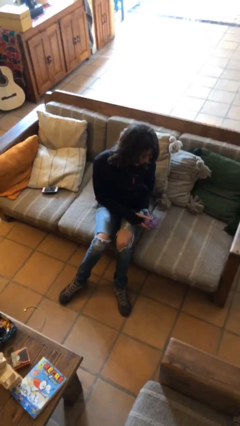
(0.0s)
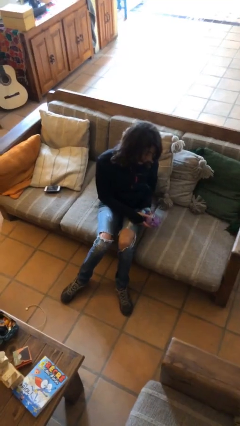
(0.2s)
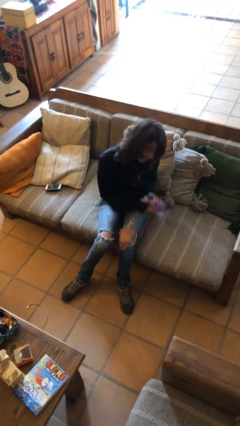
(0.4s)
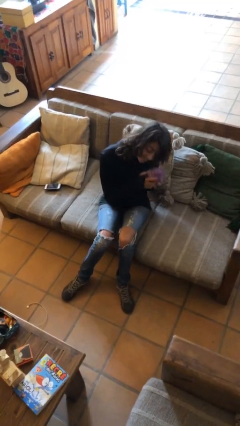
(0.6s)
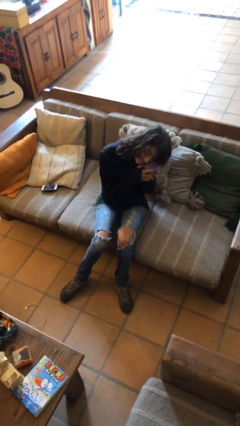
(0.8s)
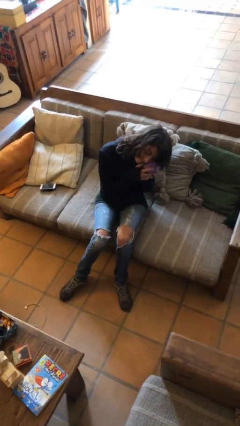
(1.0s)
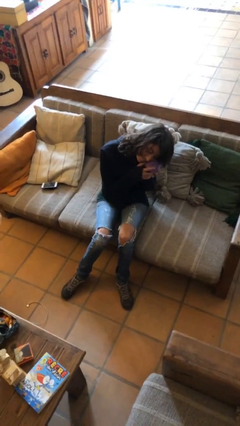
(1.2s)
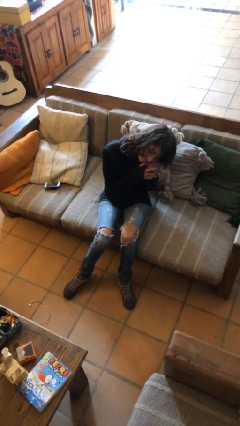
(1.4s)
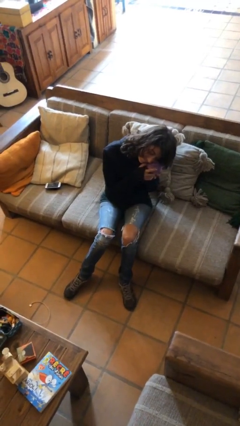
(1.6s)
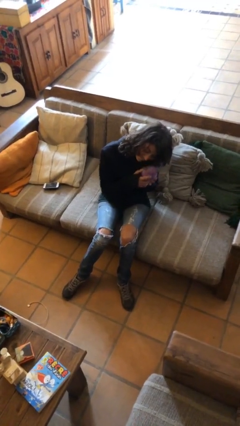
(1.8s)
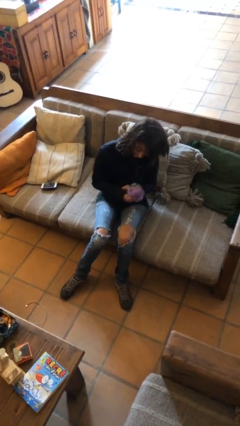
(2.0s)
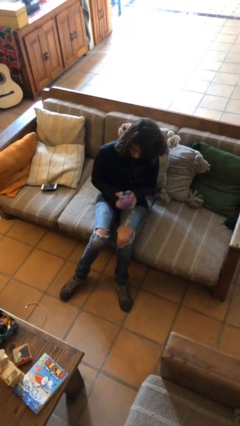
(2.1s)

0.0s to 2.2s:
person hugs stuffed animal

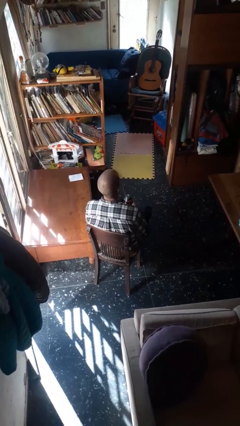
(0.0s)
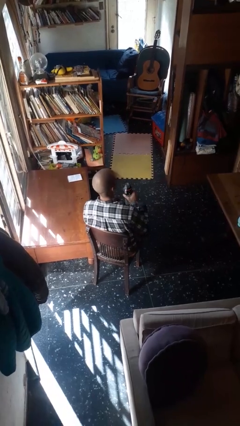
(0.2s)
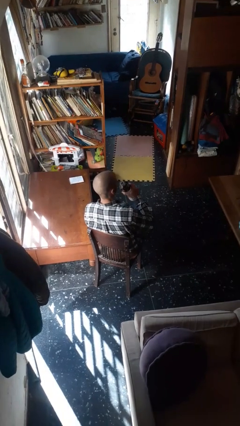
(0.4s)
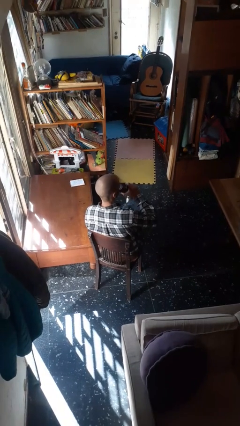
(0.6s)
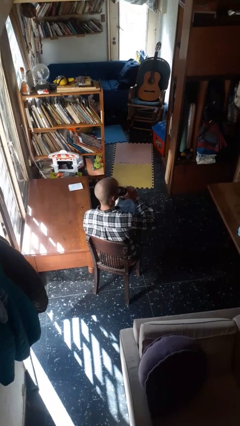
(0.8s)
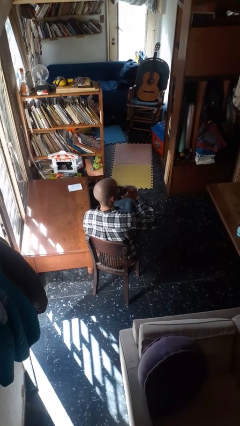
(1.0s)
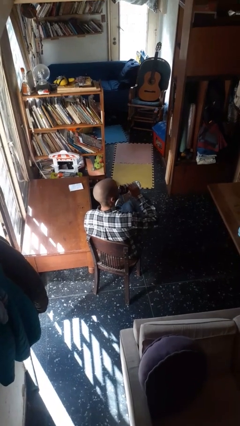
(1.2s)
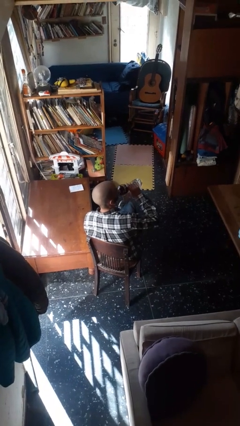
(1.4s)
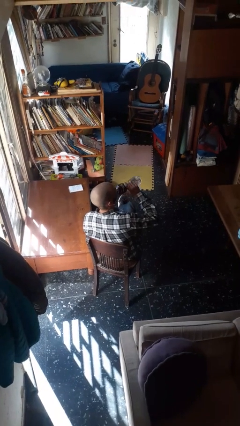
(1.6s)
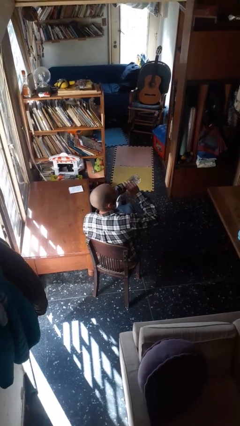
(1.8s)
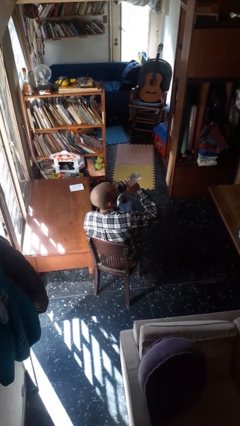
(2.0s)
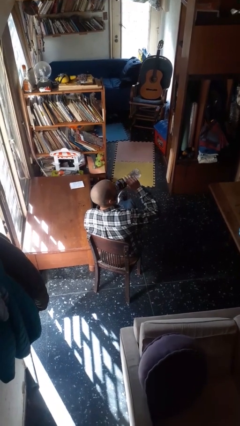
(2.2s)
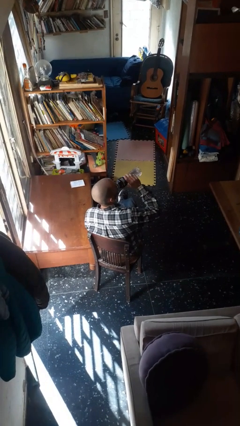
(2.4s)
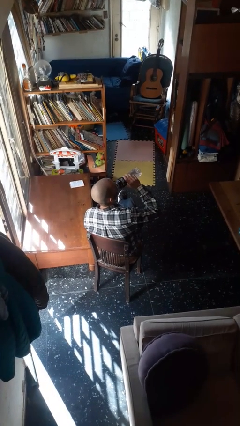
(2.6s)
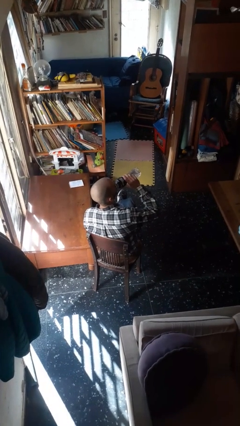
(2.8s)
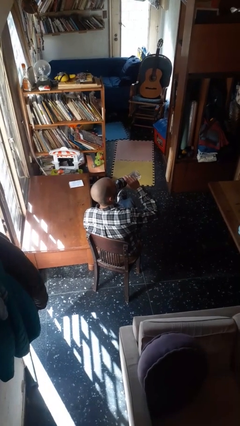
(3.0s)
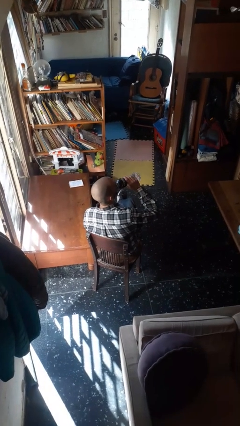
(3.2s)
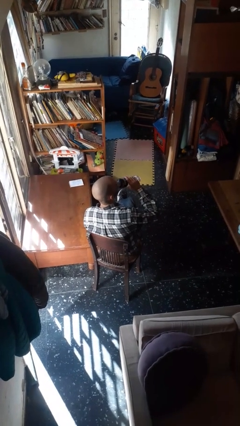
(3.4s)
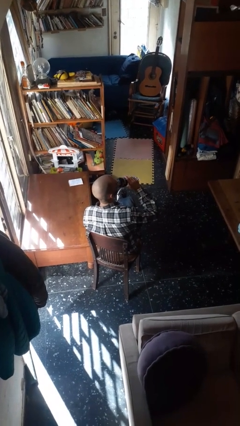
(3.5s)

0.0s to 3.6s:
person drinks from bottle

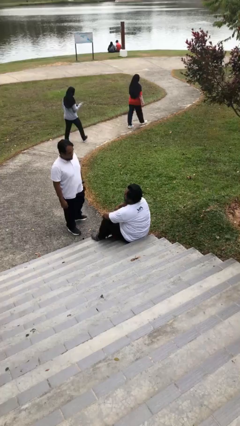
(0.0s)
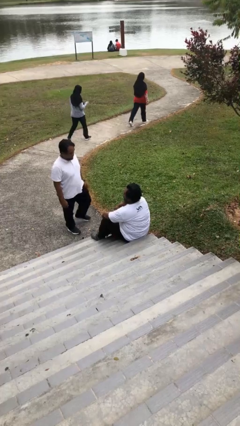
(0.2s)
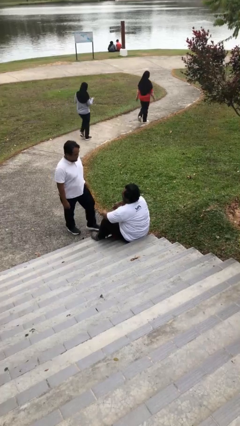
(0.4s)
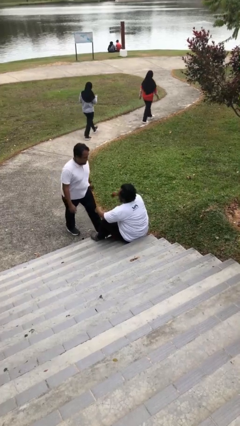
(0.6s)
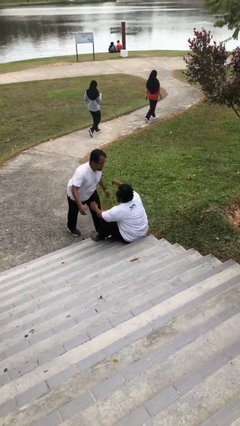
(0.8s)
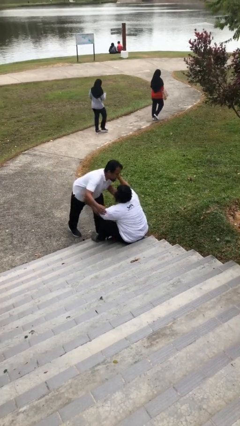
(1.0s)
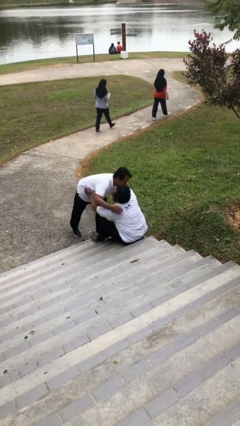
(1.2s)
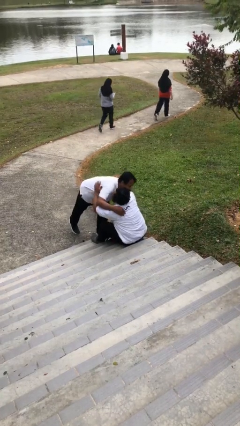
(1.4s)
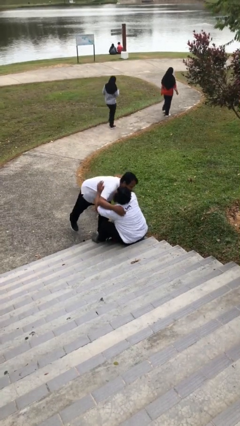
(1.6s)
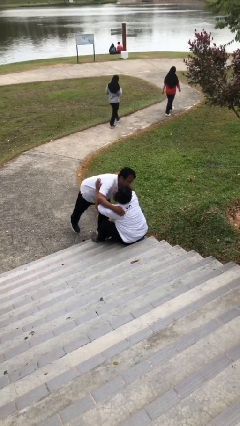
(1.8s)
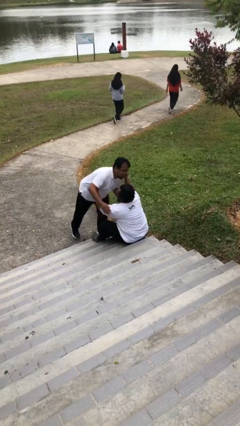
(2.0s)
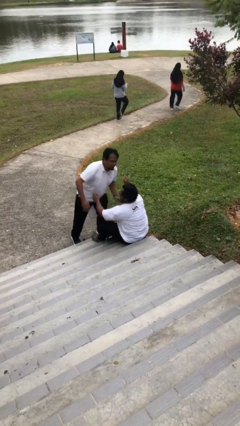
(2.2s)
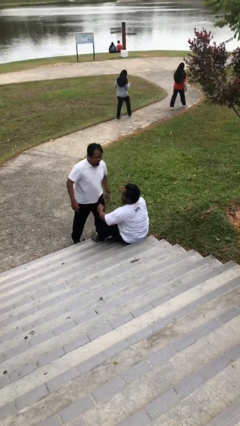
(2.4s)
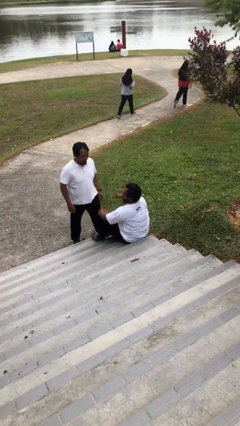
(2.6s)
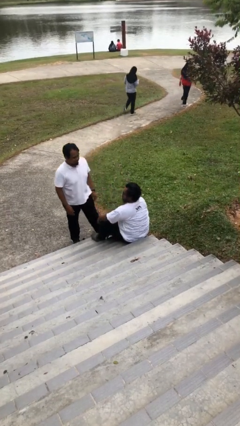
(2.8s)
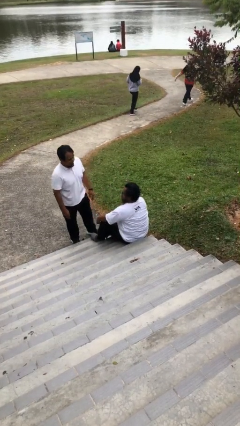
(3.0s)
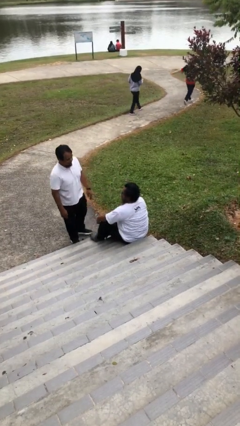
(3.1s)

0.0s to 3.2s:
person embraces person

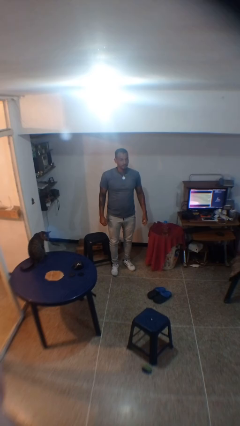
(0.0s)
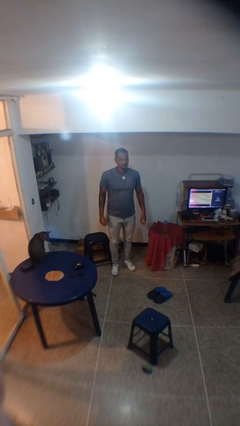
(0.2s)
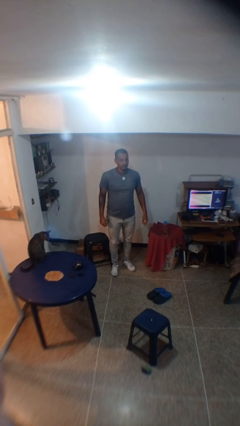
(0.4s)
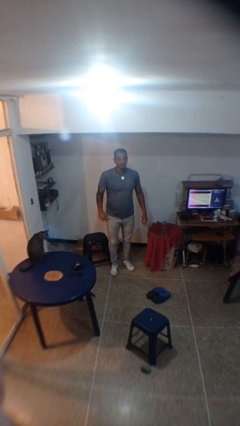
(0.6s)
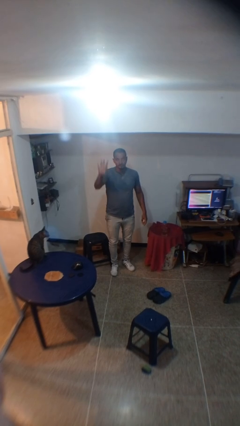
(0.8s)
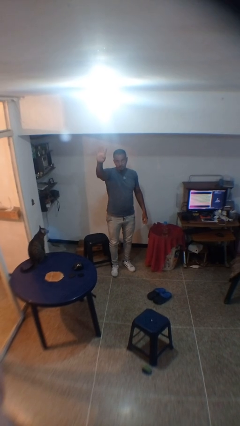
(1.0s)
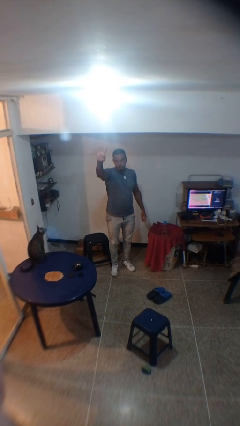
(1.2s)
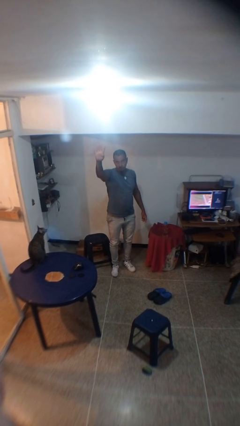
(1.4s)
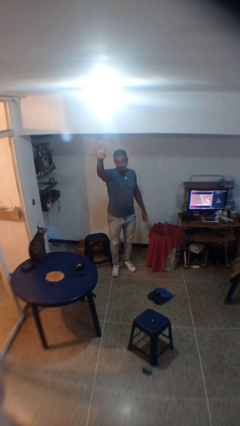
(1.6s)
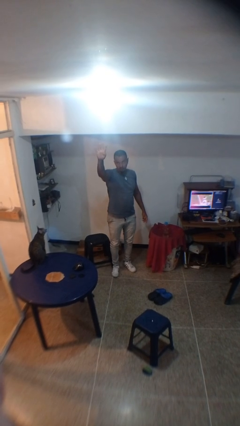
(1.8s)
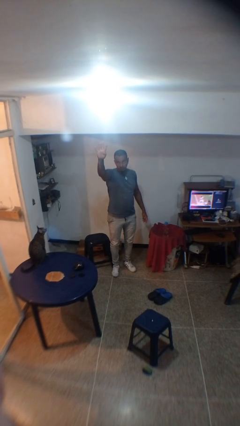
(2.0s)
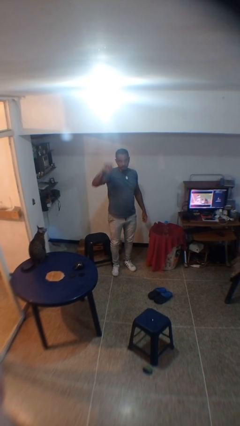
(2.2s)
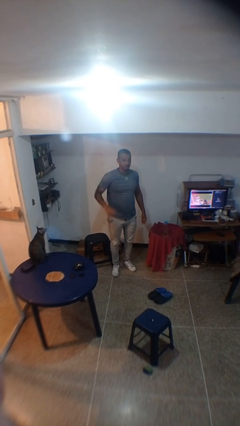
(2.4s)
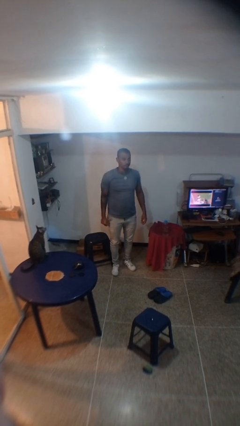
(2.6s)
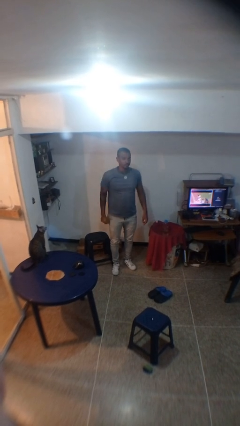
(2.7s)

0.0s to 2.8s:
person gestures number four

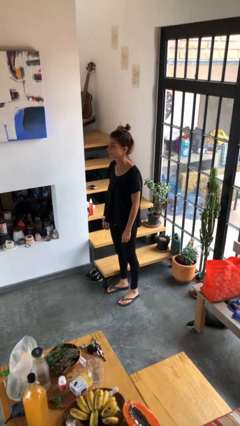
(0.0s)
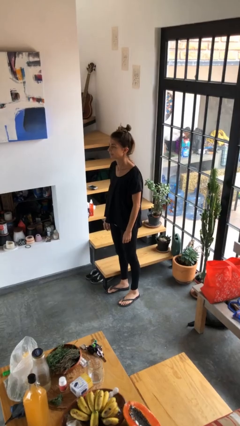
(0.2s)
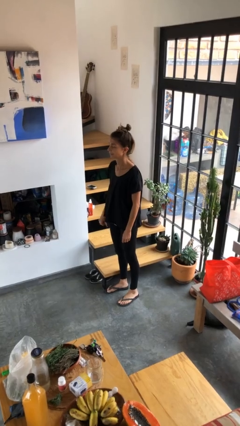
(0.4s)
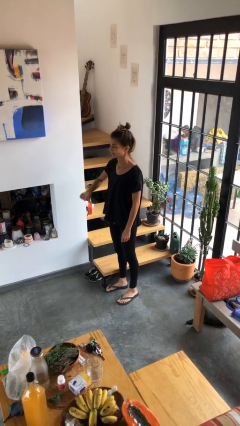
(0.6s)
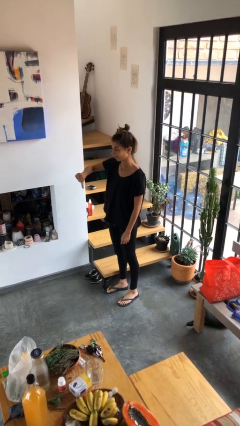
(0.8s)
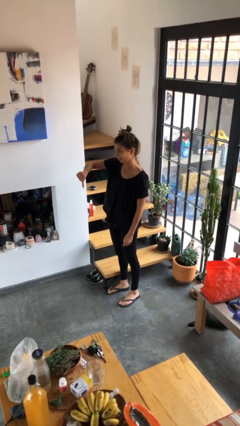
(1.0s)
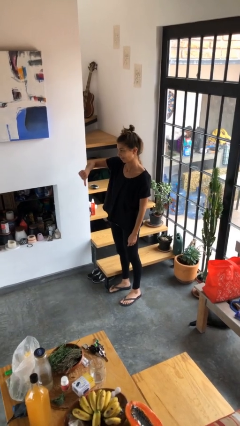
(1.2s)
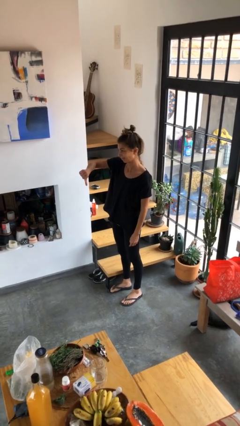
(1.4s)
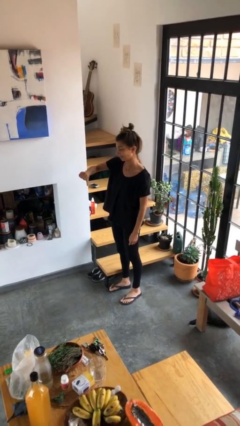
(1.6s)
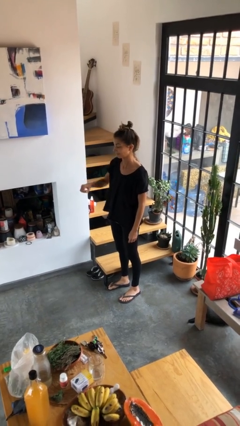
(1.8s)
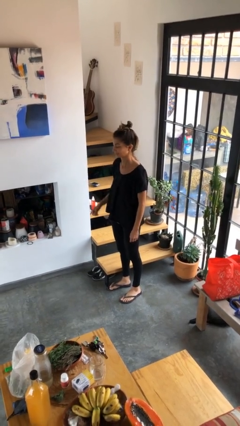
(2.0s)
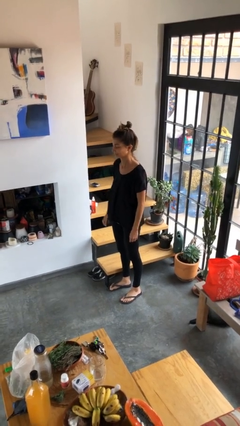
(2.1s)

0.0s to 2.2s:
person gestures thumbs down

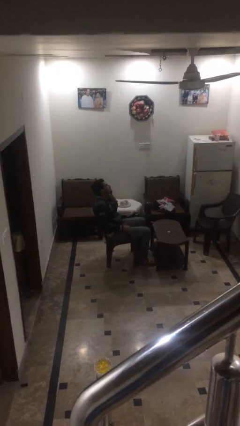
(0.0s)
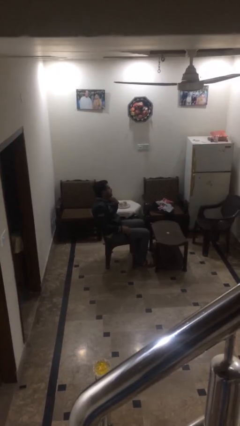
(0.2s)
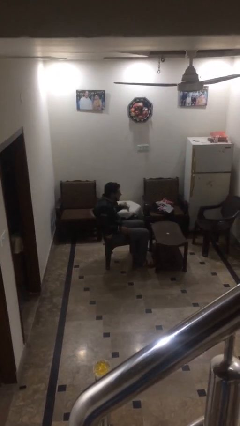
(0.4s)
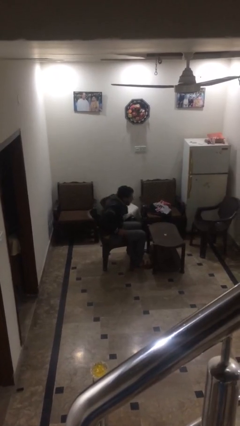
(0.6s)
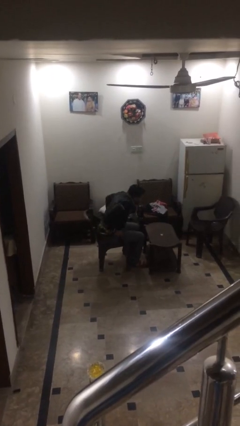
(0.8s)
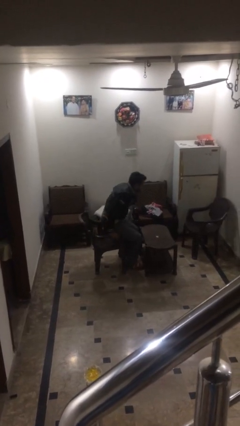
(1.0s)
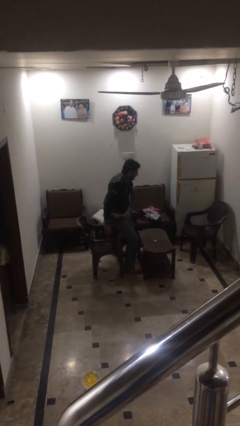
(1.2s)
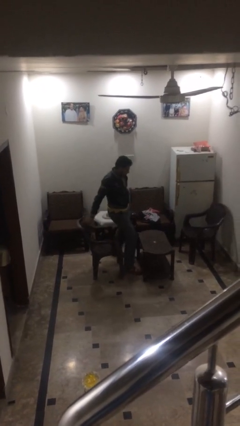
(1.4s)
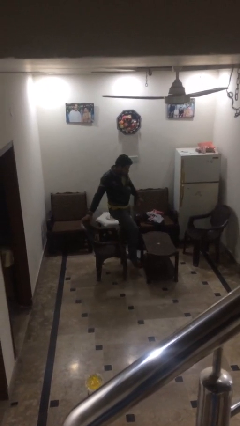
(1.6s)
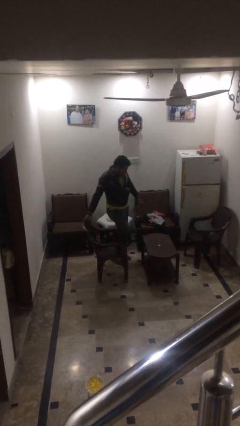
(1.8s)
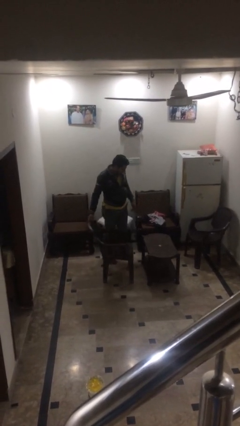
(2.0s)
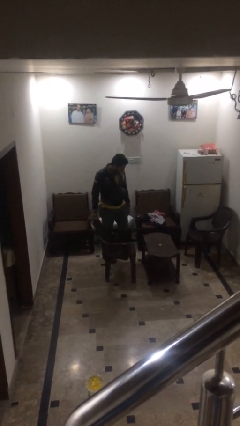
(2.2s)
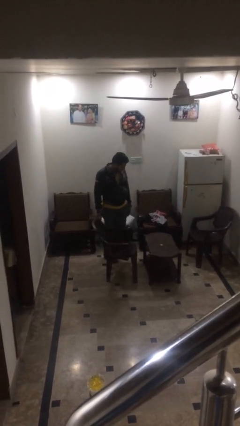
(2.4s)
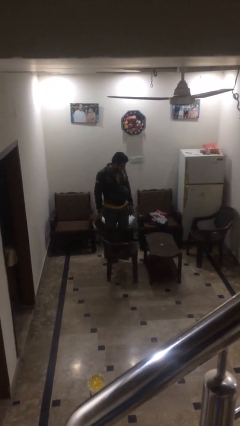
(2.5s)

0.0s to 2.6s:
person stands up

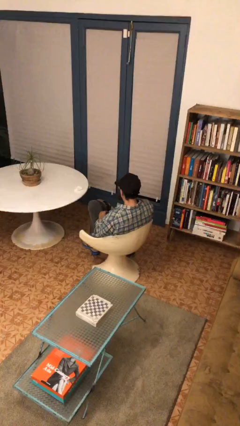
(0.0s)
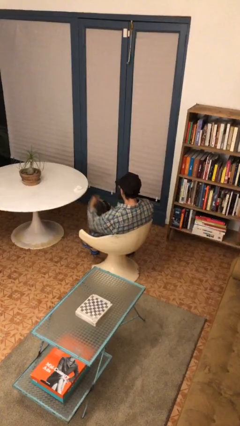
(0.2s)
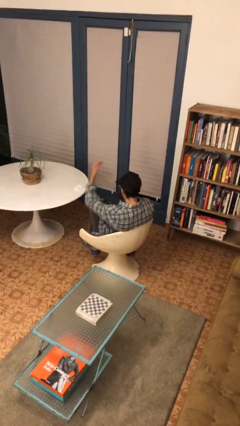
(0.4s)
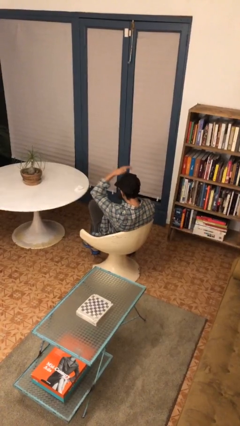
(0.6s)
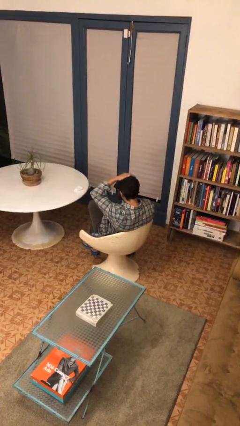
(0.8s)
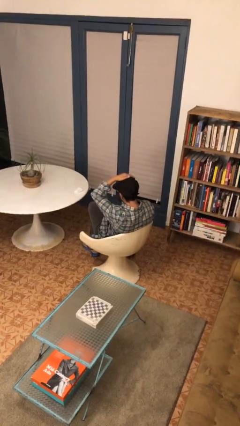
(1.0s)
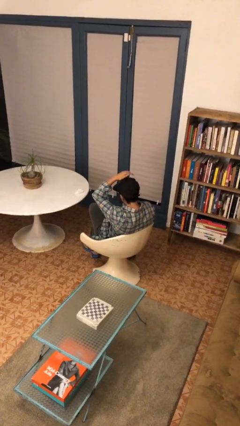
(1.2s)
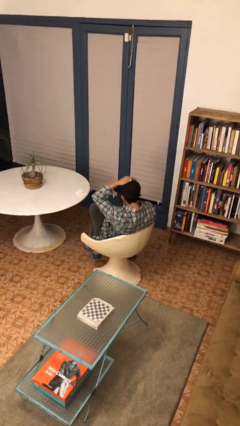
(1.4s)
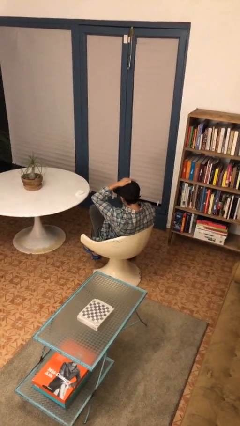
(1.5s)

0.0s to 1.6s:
person pats head
